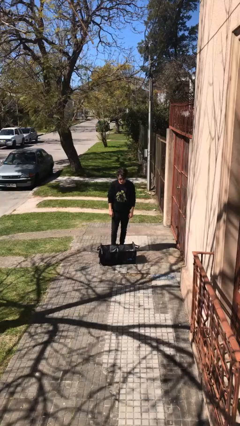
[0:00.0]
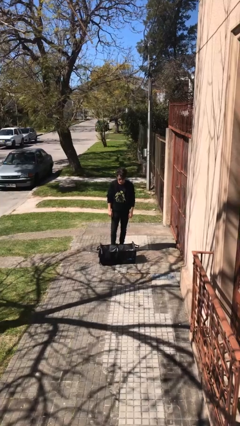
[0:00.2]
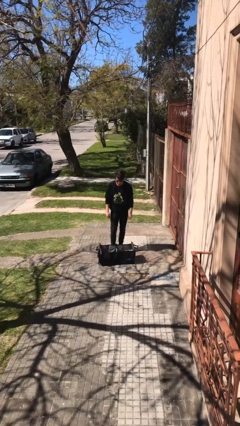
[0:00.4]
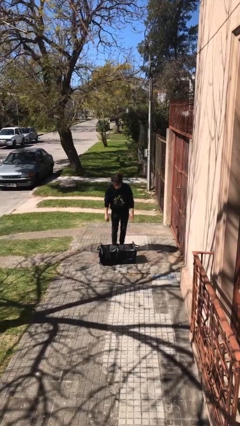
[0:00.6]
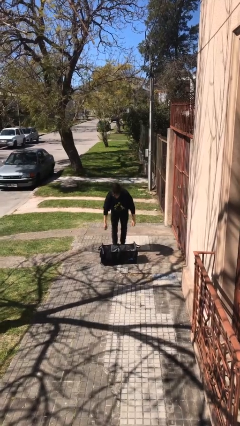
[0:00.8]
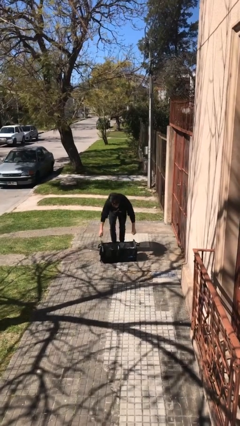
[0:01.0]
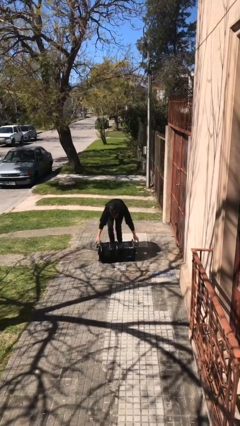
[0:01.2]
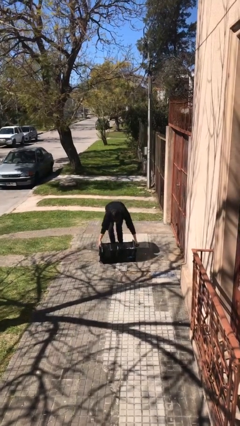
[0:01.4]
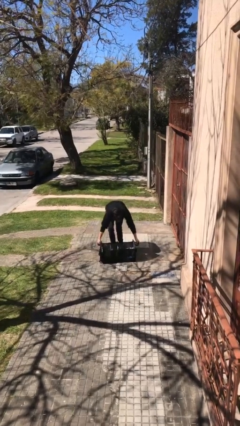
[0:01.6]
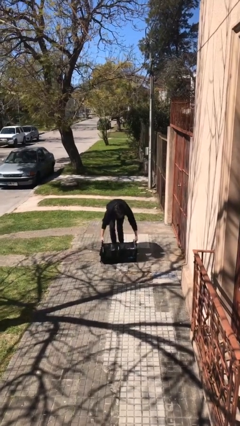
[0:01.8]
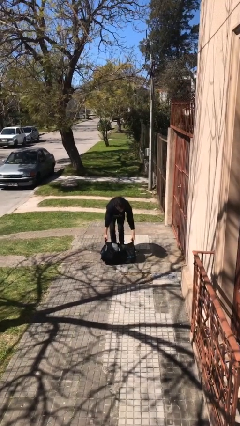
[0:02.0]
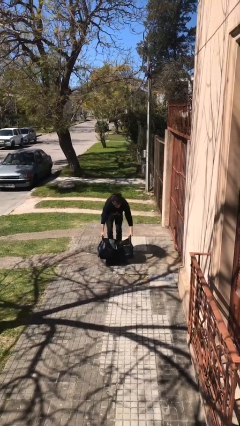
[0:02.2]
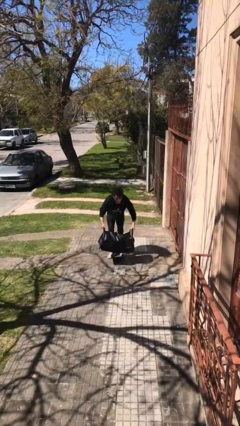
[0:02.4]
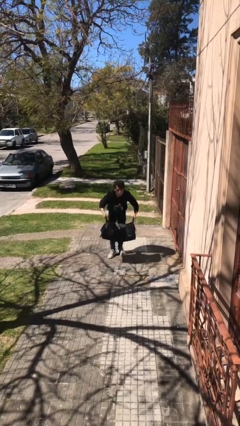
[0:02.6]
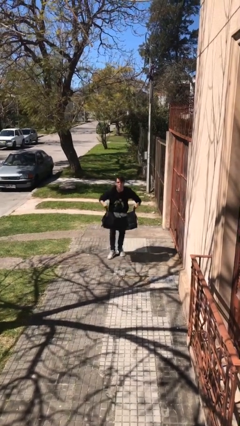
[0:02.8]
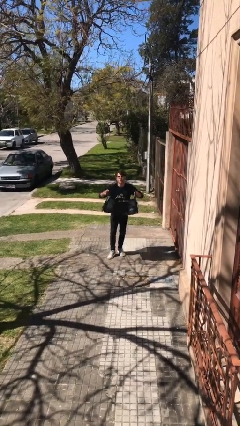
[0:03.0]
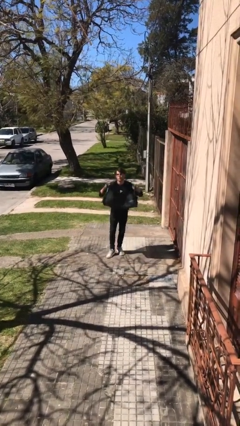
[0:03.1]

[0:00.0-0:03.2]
person picks up object from floor

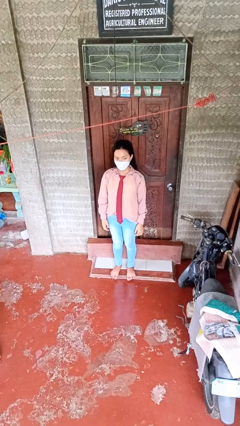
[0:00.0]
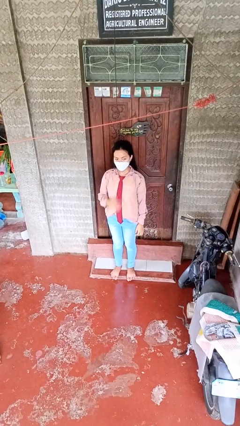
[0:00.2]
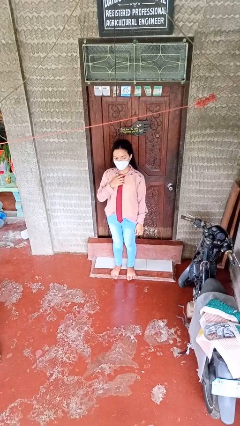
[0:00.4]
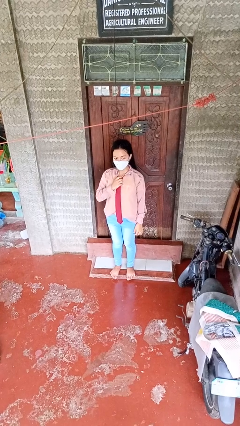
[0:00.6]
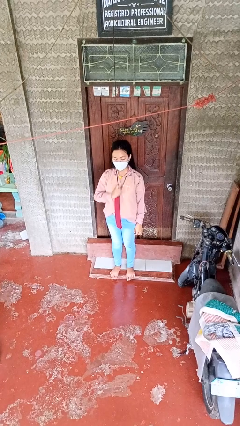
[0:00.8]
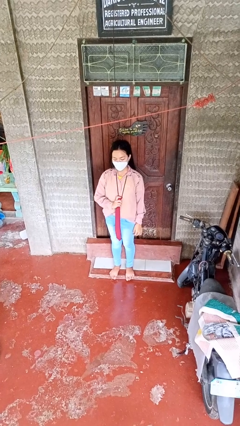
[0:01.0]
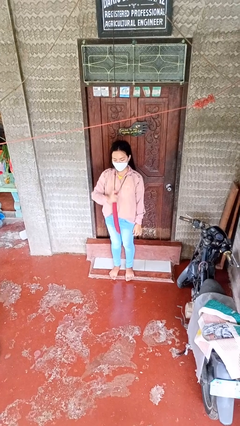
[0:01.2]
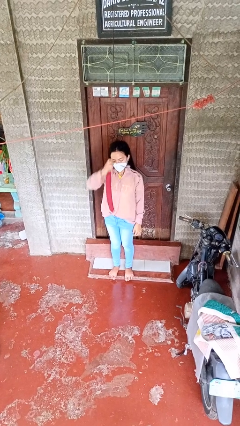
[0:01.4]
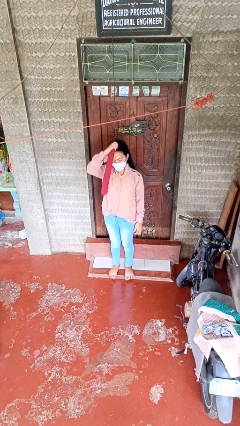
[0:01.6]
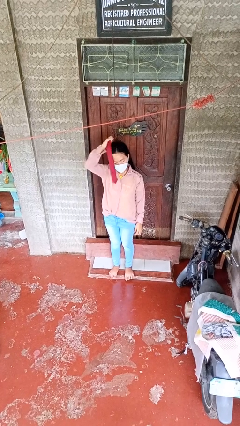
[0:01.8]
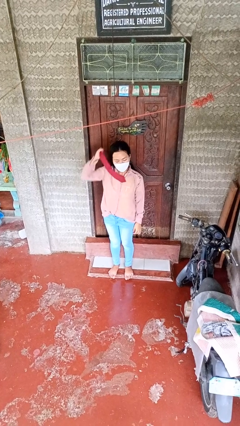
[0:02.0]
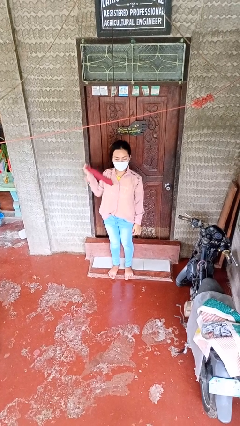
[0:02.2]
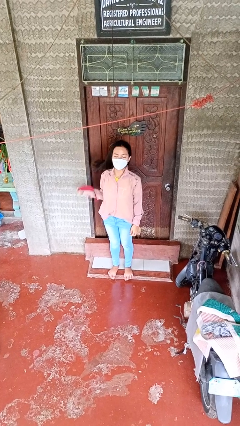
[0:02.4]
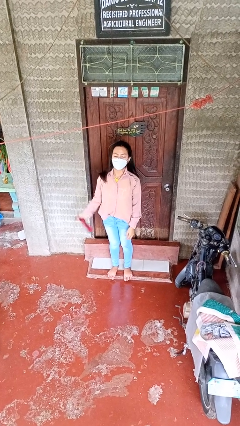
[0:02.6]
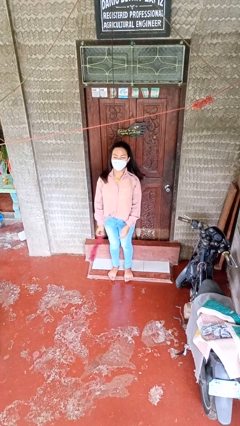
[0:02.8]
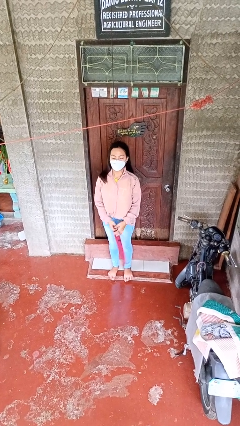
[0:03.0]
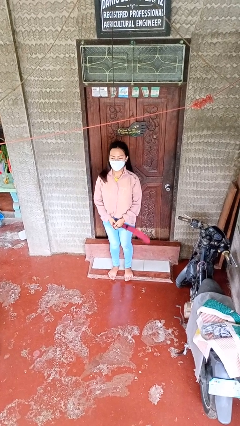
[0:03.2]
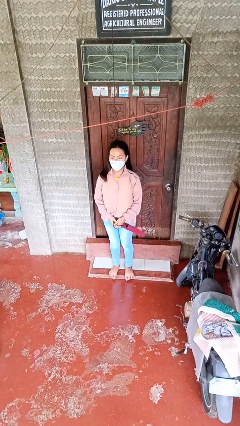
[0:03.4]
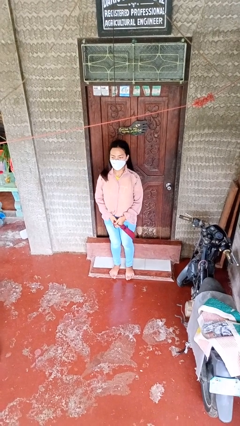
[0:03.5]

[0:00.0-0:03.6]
person takes off necktie

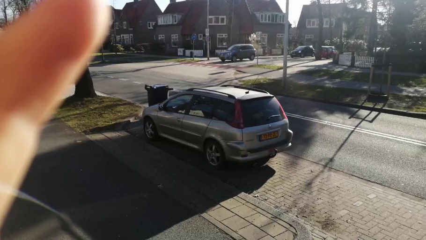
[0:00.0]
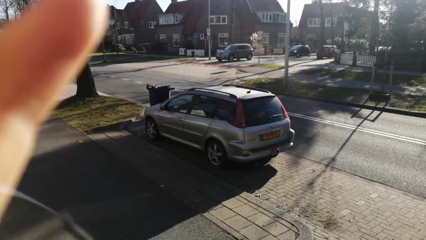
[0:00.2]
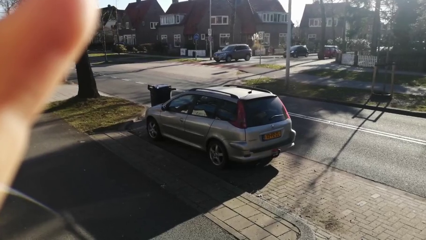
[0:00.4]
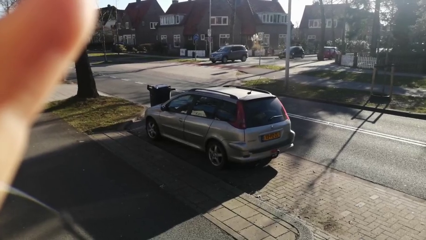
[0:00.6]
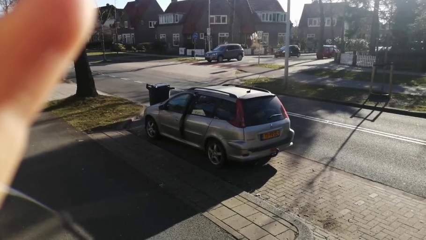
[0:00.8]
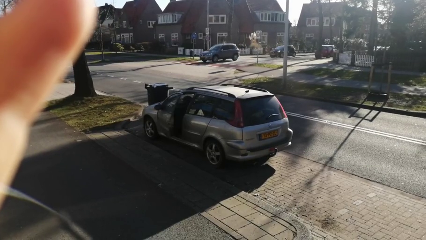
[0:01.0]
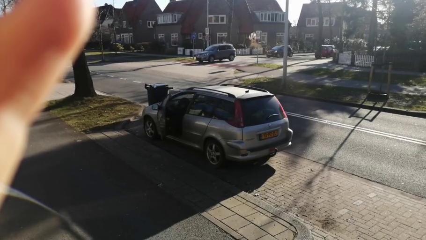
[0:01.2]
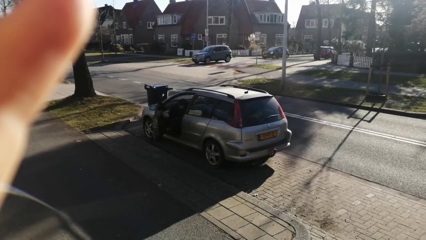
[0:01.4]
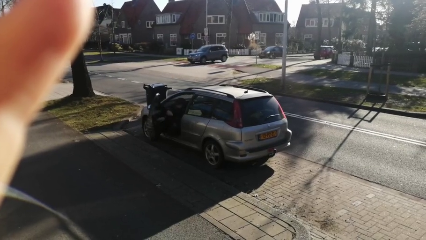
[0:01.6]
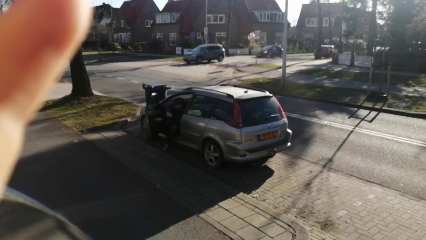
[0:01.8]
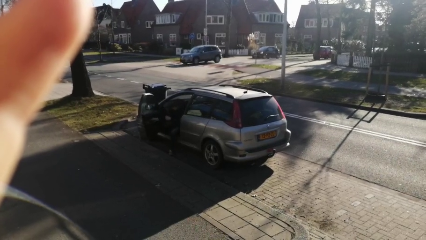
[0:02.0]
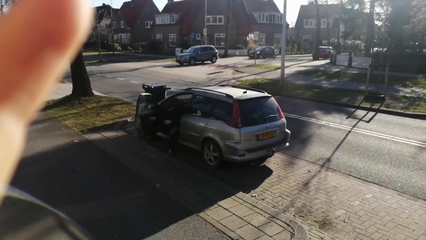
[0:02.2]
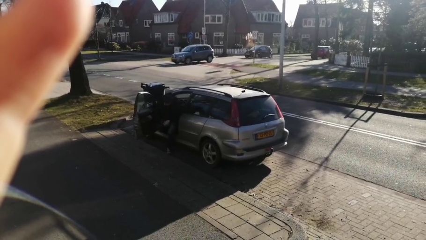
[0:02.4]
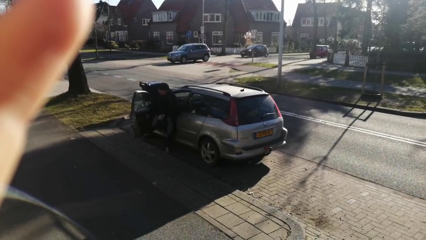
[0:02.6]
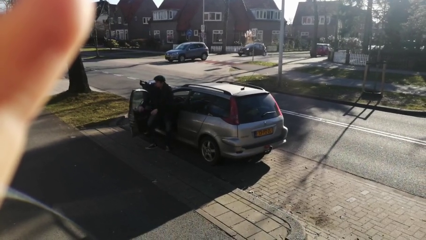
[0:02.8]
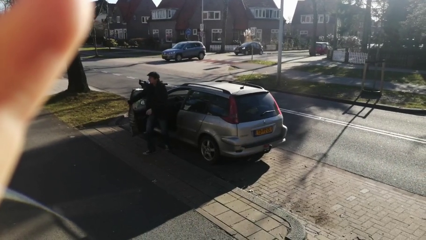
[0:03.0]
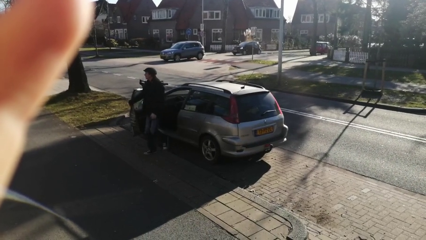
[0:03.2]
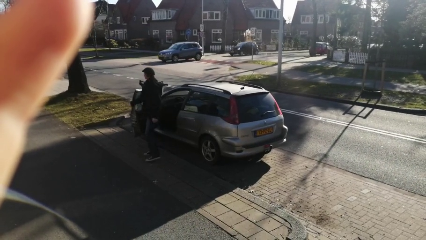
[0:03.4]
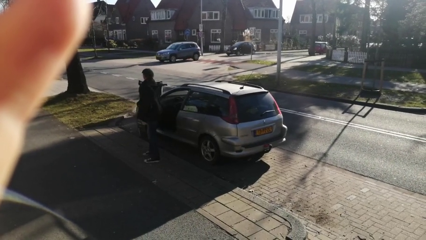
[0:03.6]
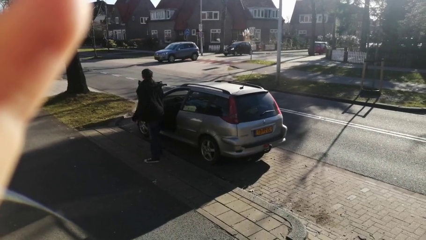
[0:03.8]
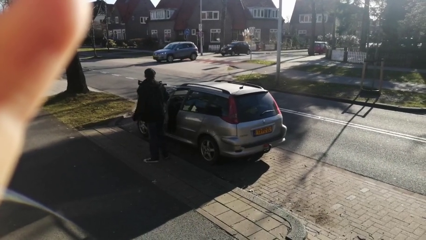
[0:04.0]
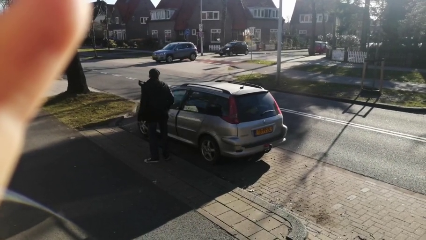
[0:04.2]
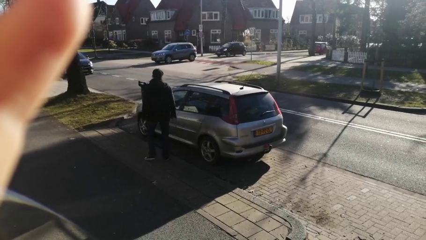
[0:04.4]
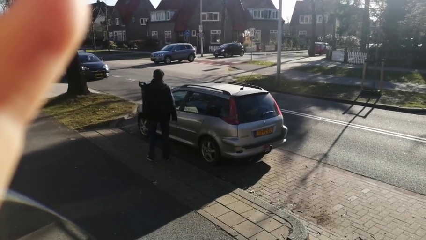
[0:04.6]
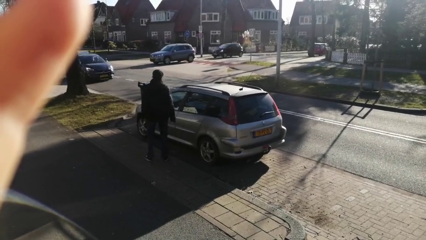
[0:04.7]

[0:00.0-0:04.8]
car drops off person

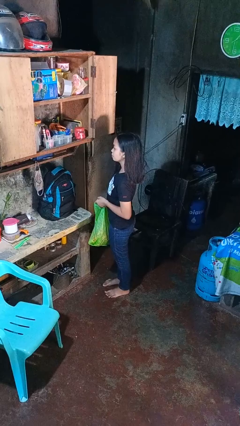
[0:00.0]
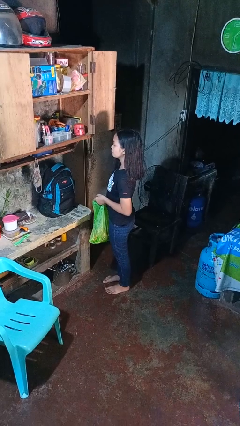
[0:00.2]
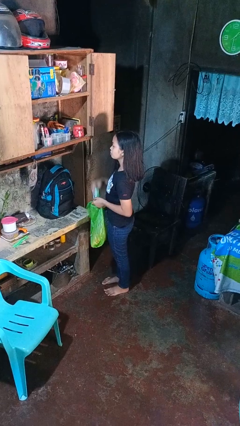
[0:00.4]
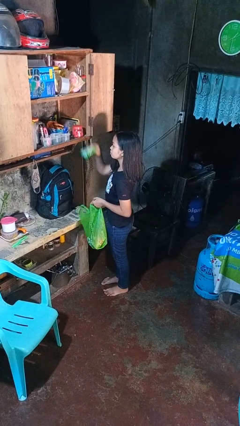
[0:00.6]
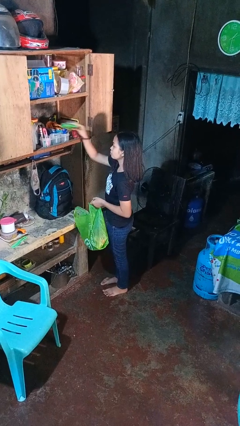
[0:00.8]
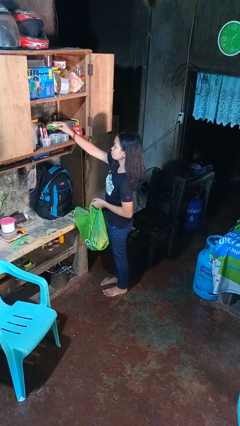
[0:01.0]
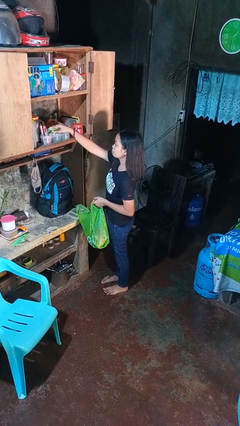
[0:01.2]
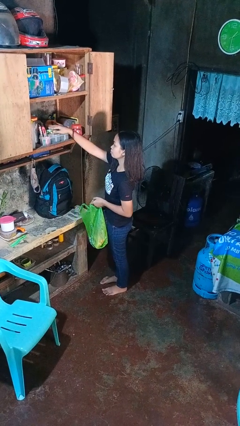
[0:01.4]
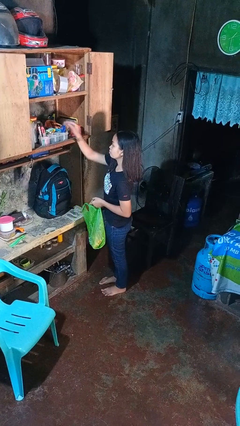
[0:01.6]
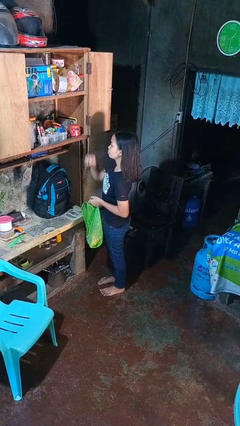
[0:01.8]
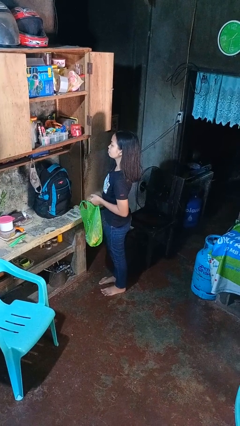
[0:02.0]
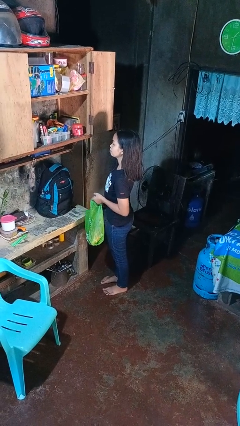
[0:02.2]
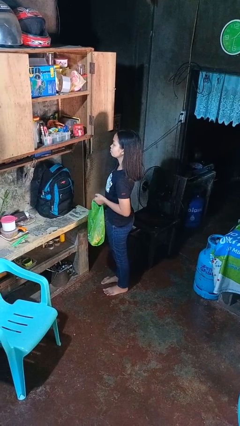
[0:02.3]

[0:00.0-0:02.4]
person loads groceries into cabinet

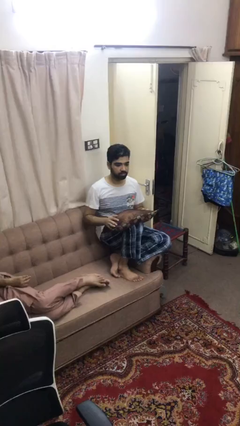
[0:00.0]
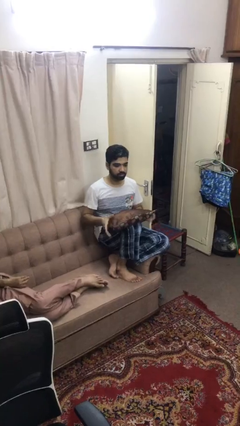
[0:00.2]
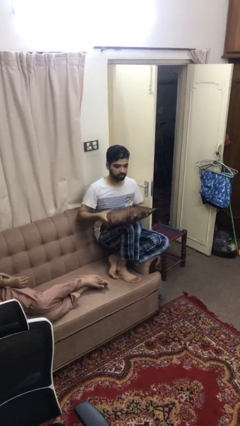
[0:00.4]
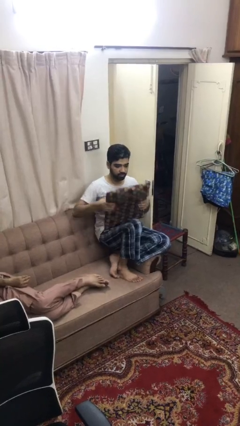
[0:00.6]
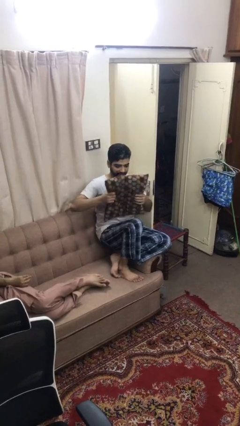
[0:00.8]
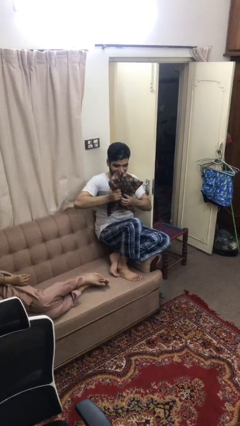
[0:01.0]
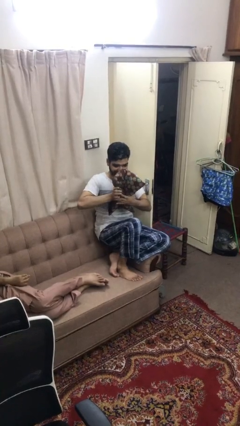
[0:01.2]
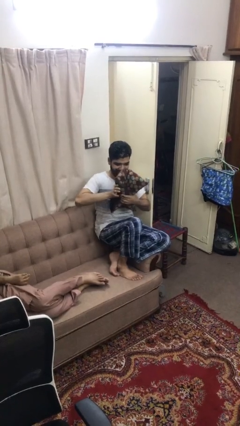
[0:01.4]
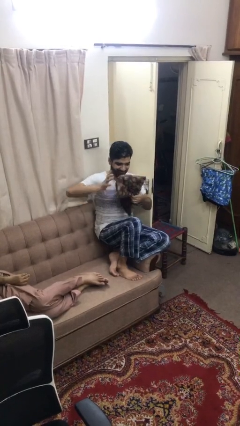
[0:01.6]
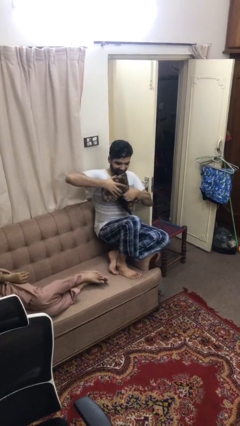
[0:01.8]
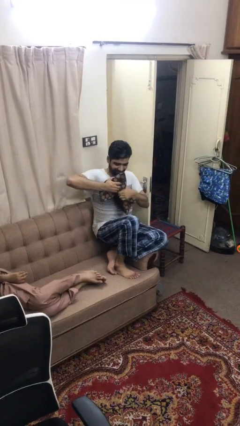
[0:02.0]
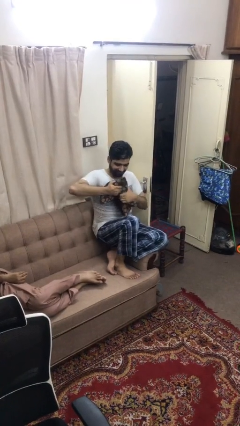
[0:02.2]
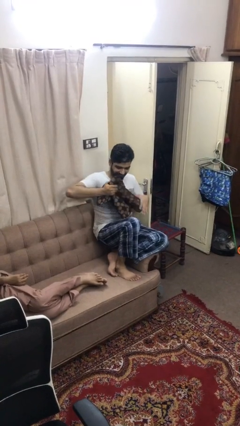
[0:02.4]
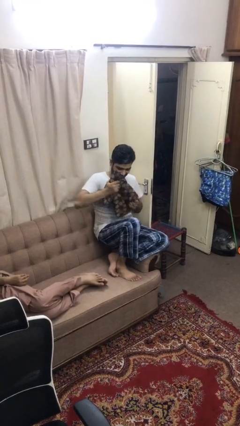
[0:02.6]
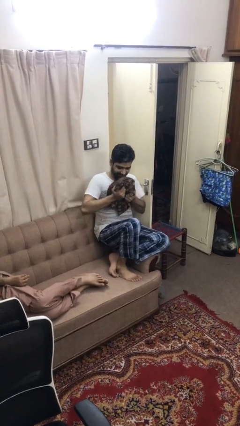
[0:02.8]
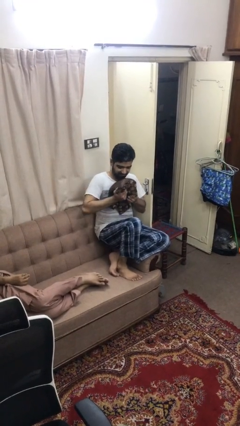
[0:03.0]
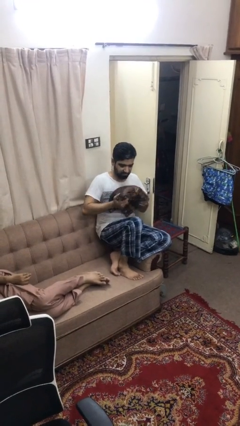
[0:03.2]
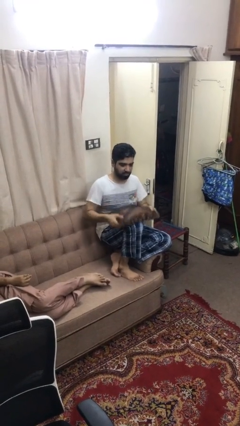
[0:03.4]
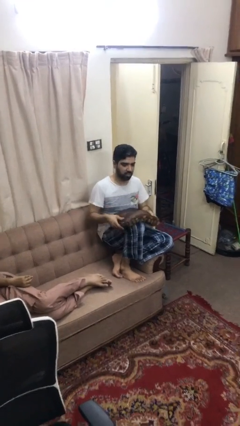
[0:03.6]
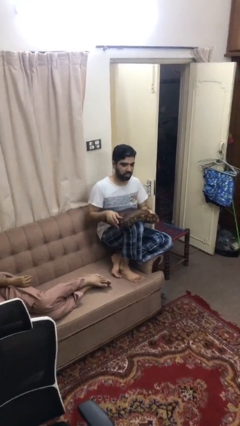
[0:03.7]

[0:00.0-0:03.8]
person squeezes object
